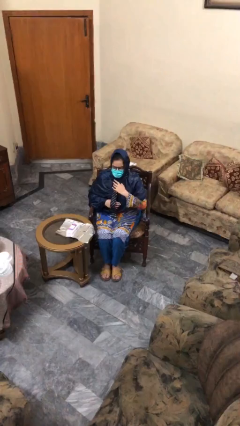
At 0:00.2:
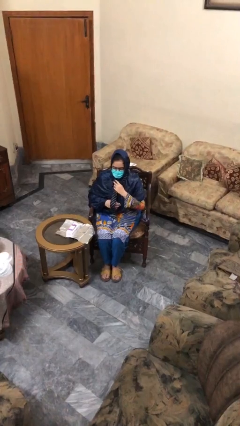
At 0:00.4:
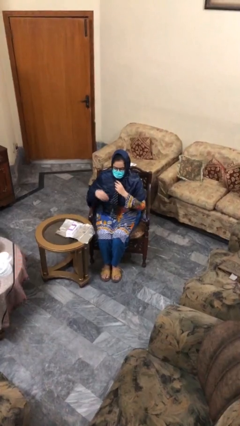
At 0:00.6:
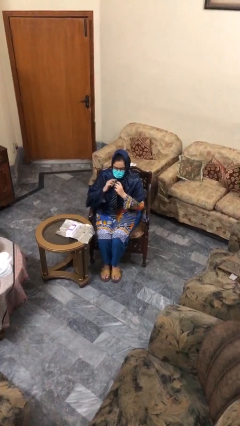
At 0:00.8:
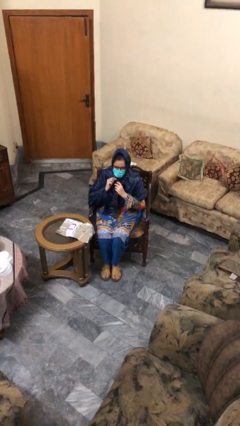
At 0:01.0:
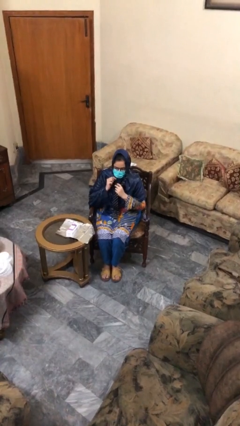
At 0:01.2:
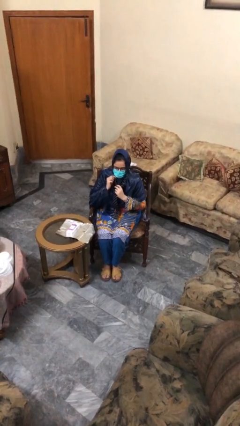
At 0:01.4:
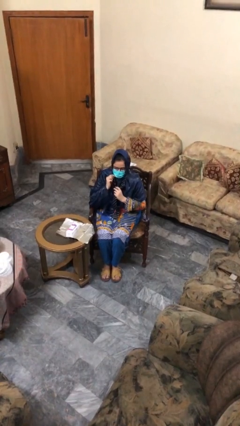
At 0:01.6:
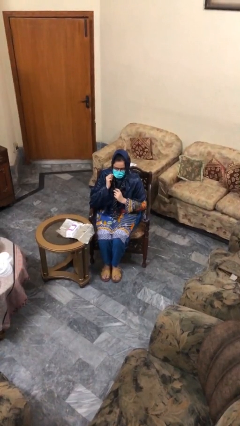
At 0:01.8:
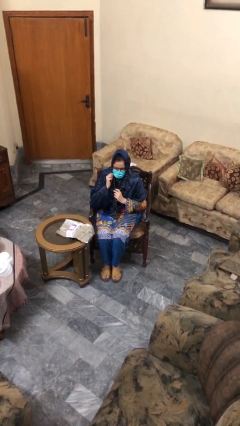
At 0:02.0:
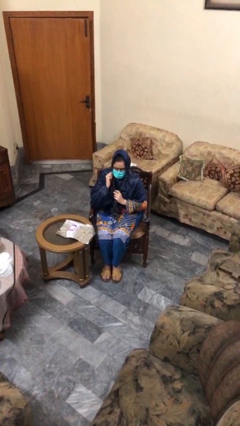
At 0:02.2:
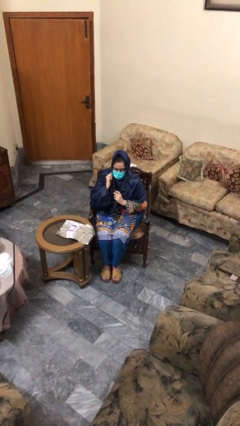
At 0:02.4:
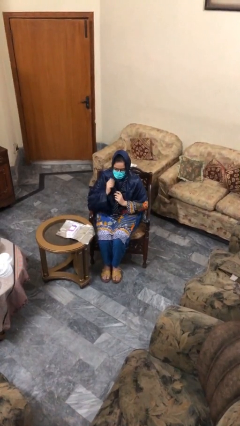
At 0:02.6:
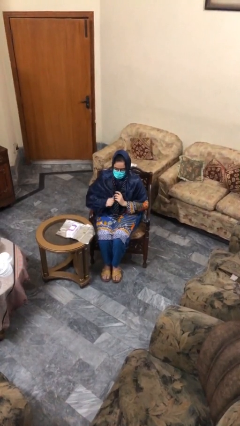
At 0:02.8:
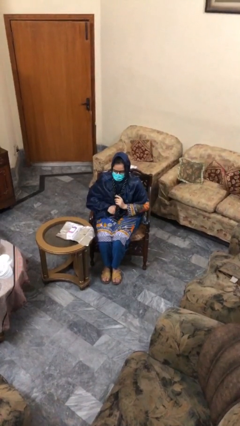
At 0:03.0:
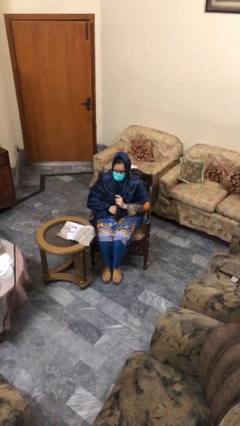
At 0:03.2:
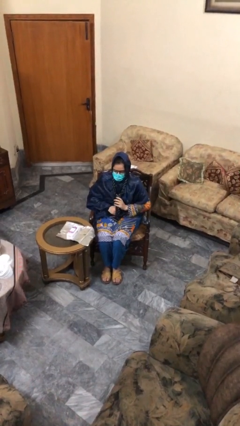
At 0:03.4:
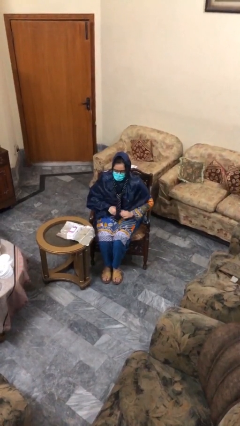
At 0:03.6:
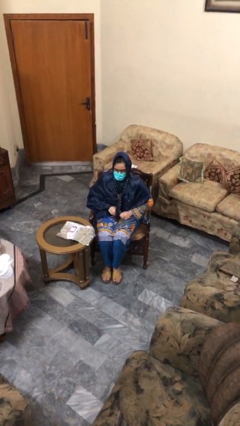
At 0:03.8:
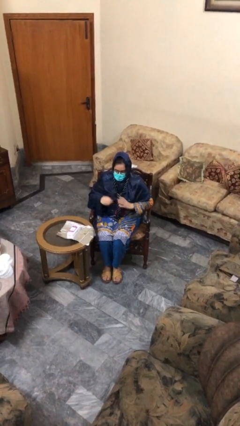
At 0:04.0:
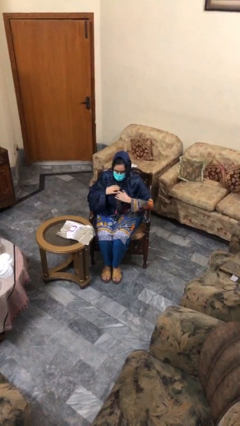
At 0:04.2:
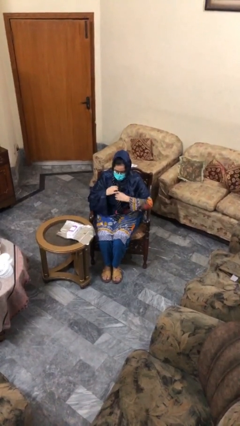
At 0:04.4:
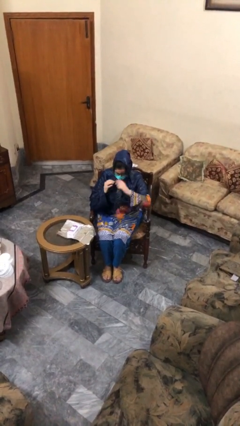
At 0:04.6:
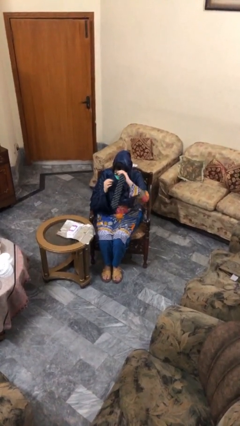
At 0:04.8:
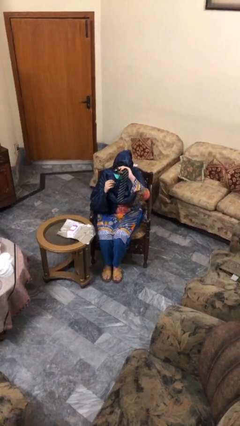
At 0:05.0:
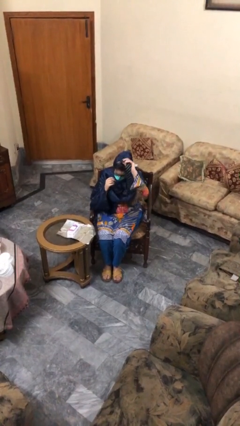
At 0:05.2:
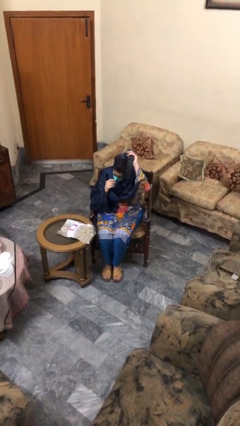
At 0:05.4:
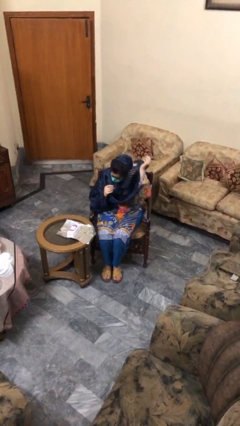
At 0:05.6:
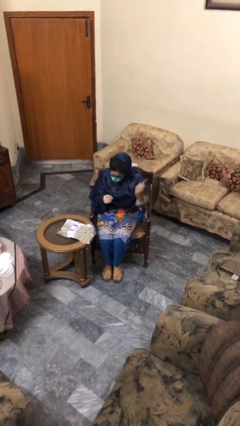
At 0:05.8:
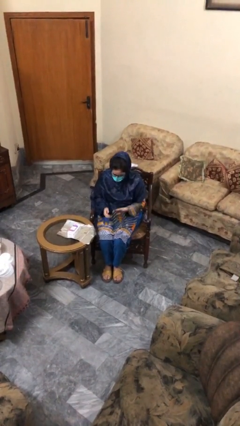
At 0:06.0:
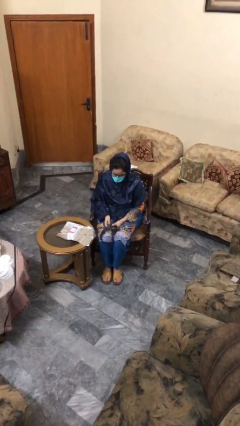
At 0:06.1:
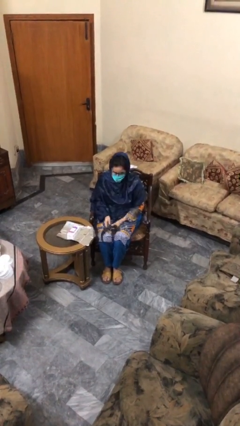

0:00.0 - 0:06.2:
person takes off necktie

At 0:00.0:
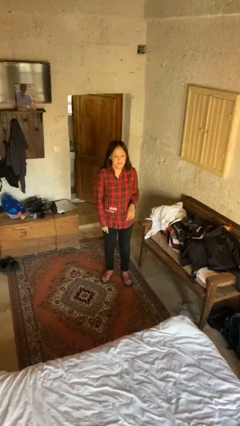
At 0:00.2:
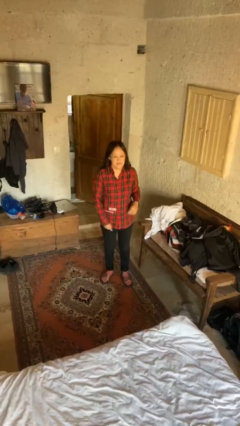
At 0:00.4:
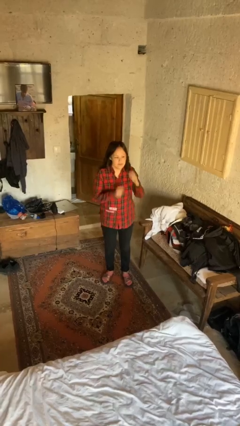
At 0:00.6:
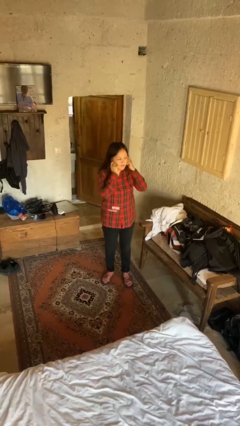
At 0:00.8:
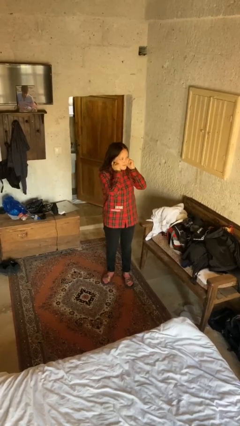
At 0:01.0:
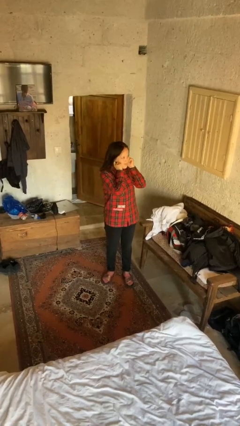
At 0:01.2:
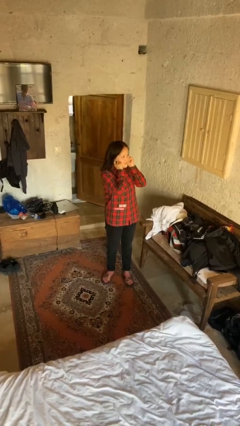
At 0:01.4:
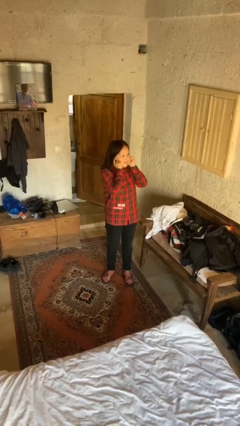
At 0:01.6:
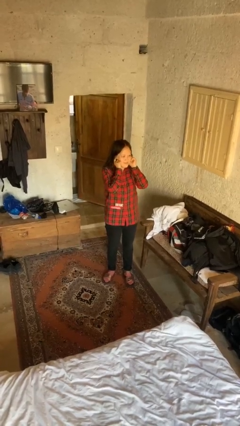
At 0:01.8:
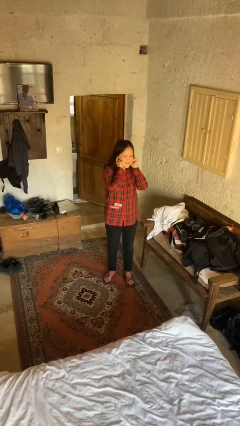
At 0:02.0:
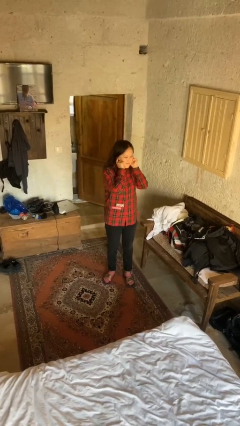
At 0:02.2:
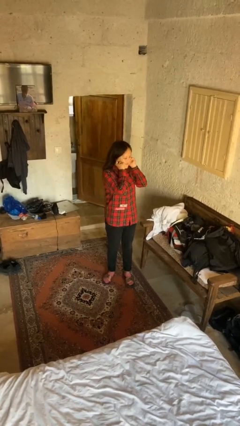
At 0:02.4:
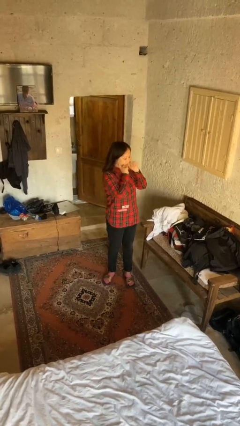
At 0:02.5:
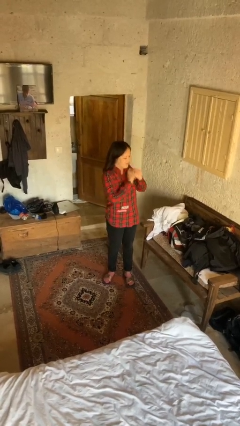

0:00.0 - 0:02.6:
person puts fingers in ear

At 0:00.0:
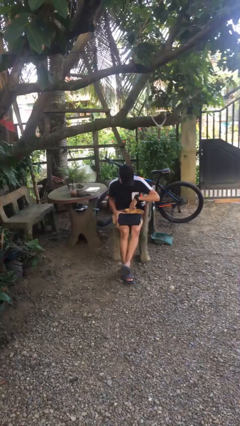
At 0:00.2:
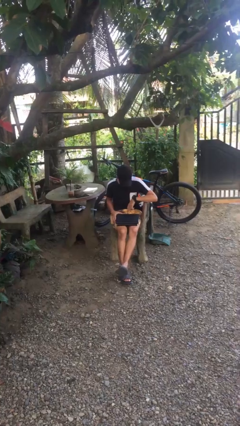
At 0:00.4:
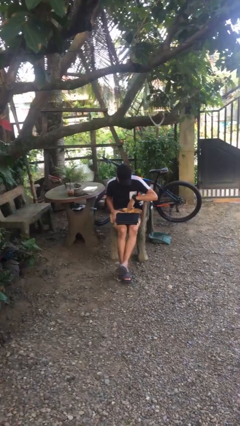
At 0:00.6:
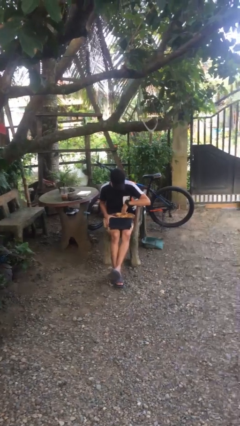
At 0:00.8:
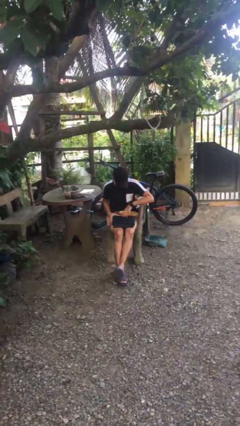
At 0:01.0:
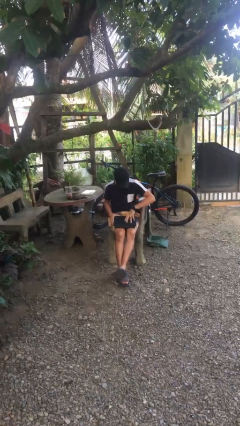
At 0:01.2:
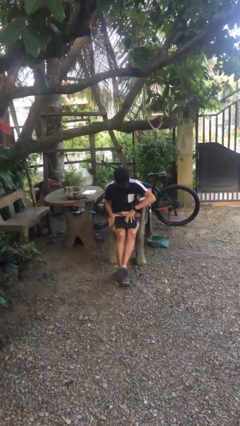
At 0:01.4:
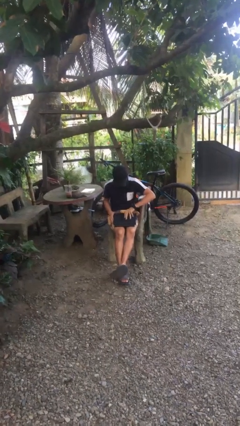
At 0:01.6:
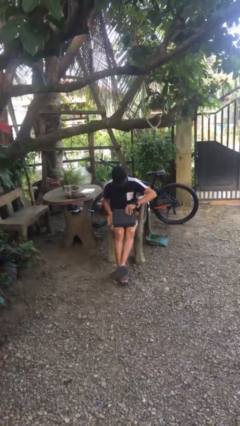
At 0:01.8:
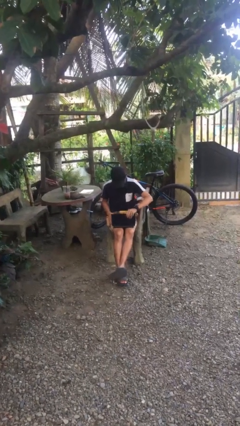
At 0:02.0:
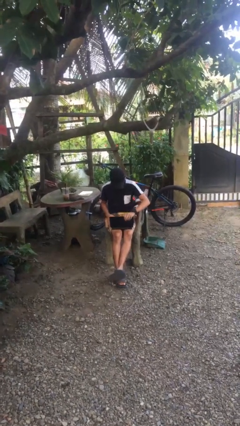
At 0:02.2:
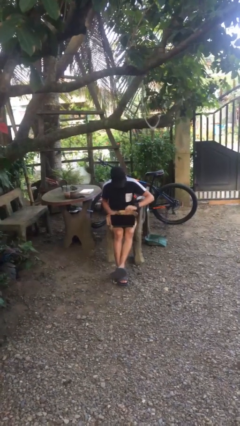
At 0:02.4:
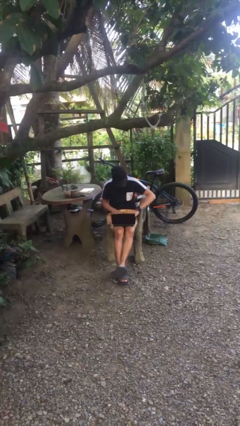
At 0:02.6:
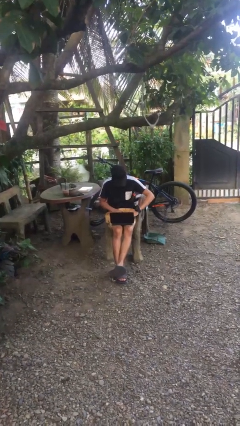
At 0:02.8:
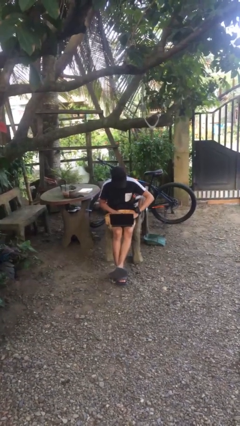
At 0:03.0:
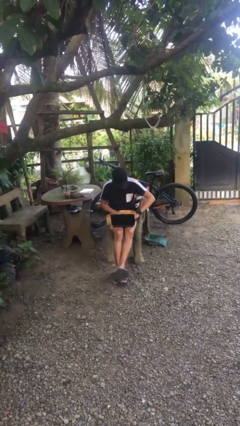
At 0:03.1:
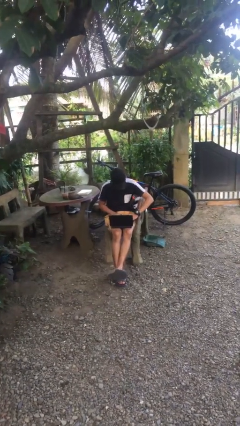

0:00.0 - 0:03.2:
person interacts with laptop

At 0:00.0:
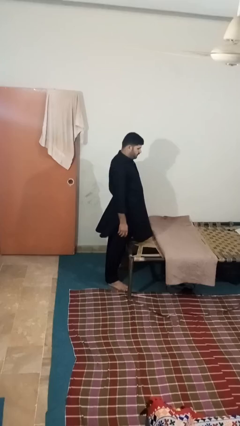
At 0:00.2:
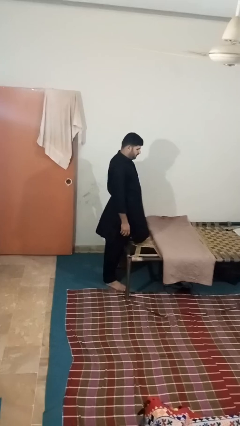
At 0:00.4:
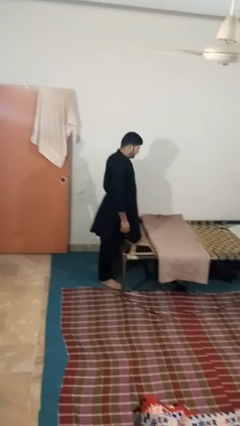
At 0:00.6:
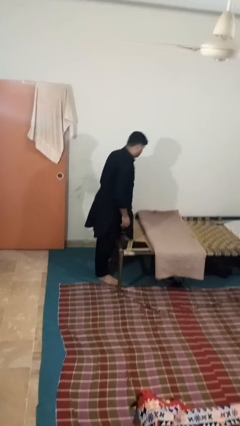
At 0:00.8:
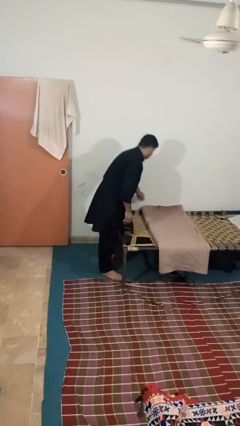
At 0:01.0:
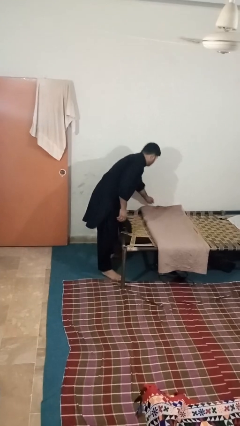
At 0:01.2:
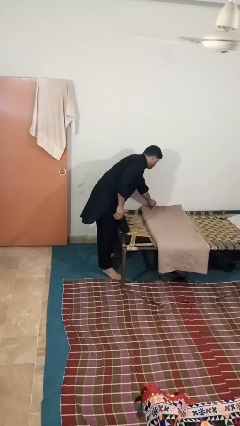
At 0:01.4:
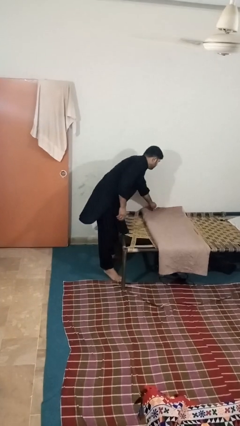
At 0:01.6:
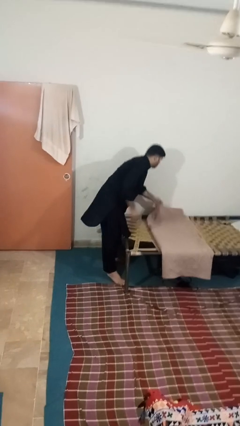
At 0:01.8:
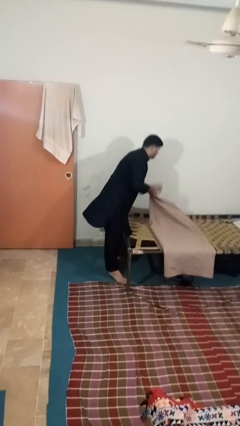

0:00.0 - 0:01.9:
person unfolds blanket

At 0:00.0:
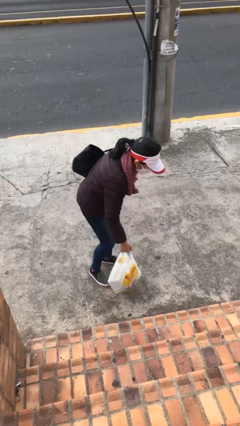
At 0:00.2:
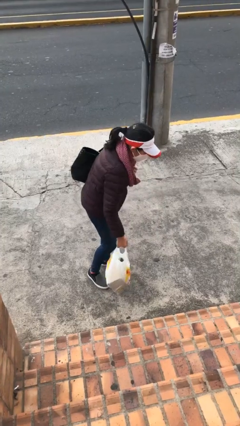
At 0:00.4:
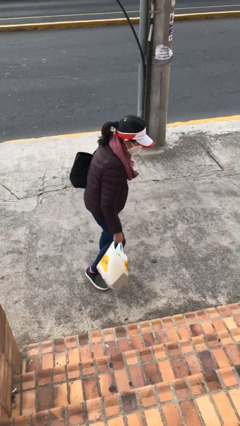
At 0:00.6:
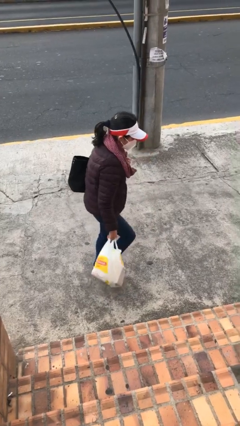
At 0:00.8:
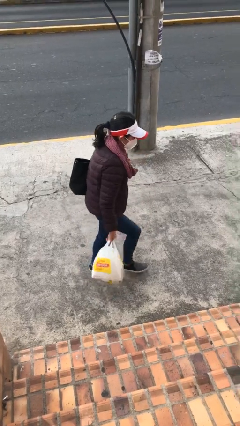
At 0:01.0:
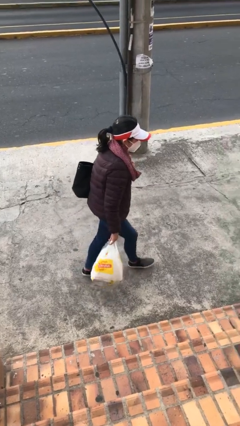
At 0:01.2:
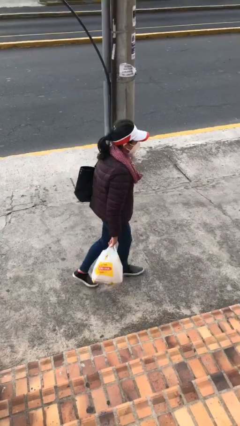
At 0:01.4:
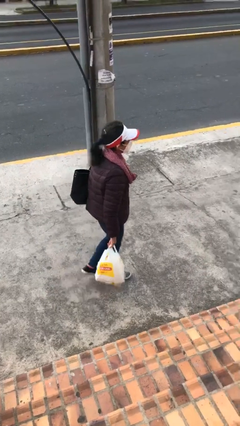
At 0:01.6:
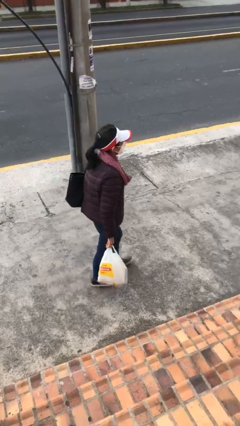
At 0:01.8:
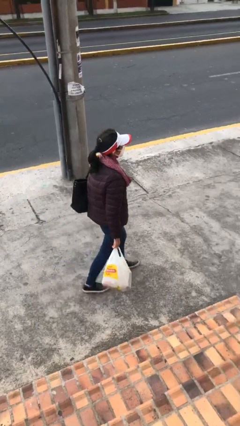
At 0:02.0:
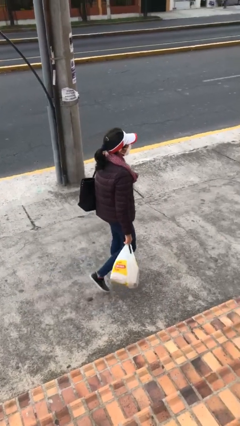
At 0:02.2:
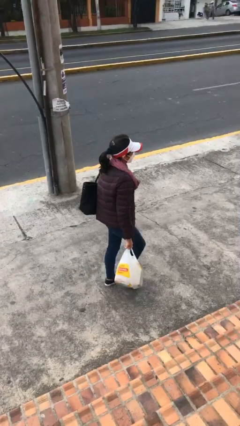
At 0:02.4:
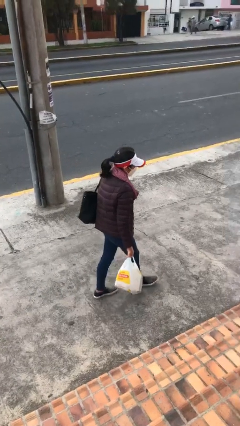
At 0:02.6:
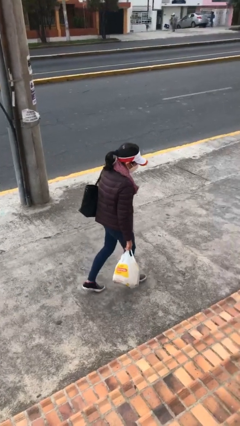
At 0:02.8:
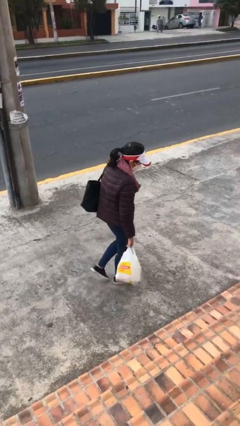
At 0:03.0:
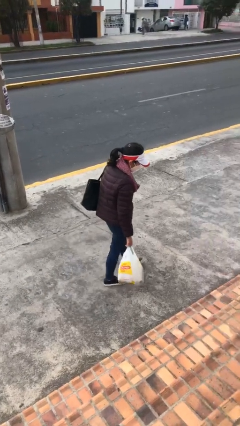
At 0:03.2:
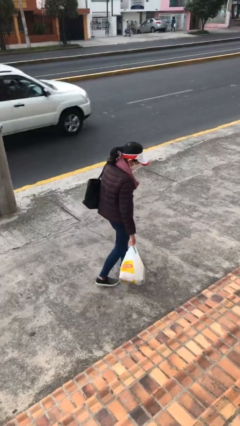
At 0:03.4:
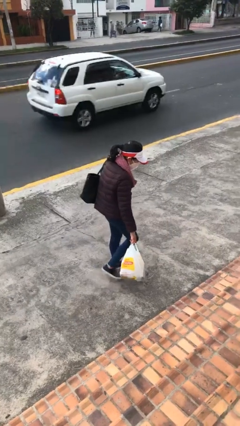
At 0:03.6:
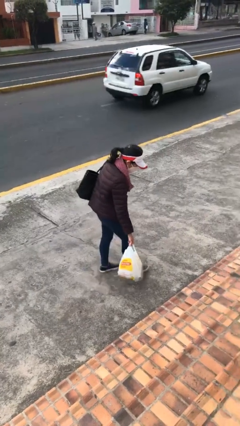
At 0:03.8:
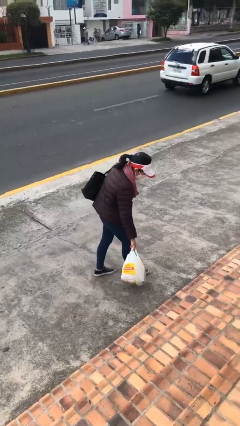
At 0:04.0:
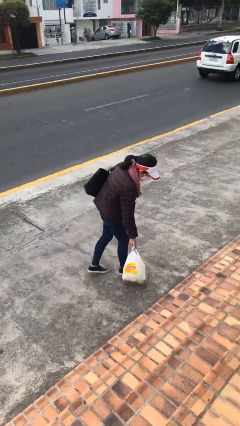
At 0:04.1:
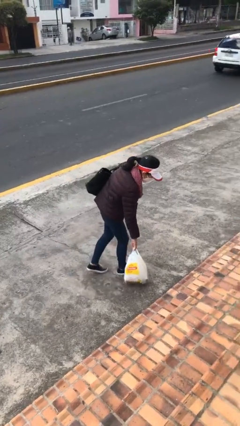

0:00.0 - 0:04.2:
person carries heavy object
